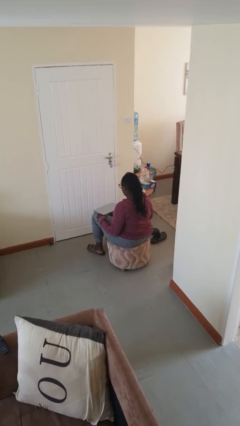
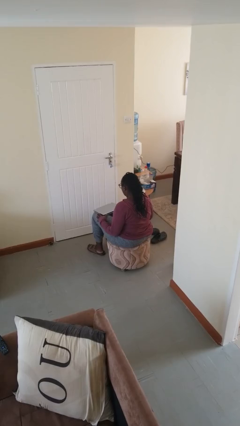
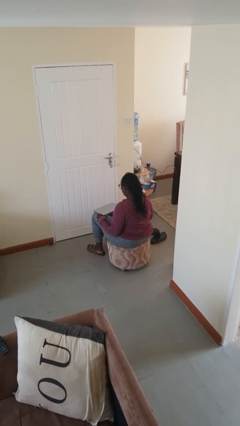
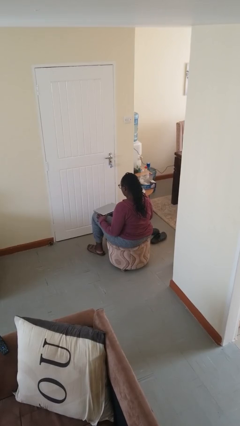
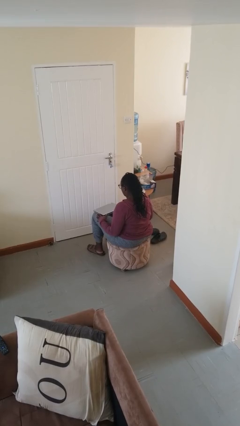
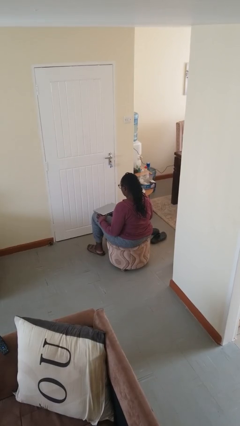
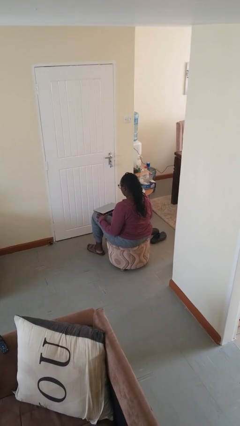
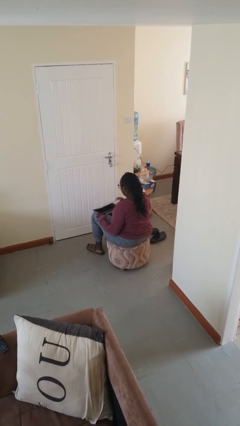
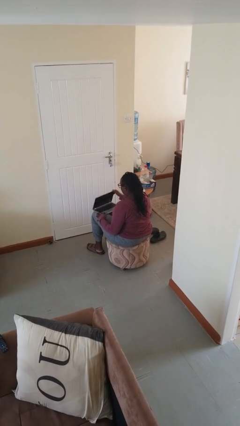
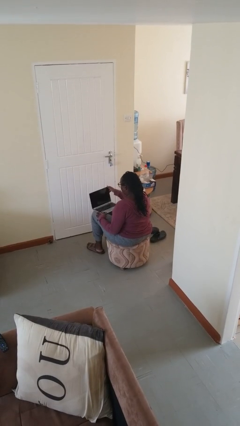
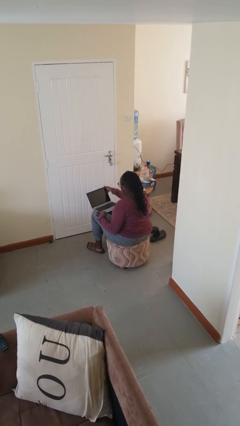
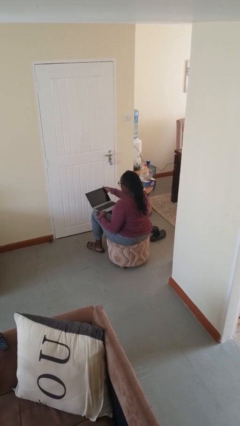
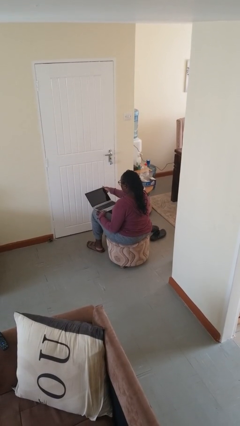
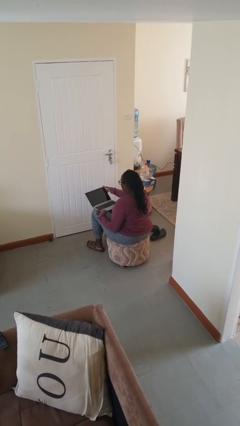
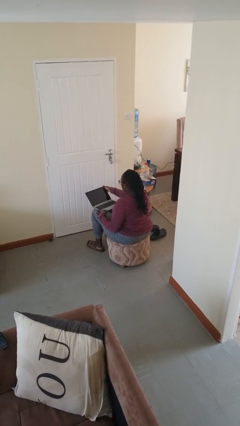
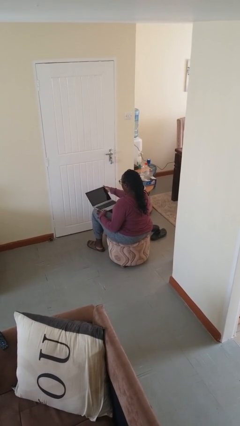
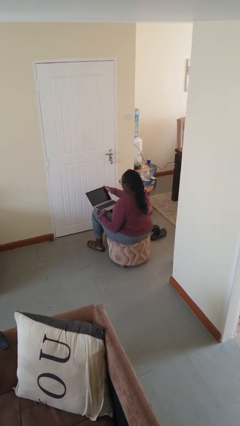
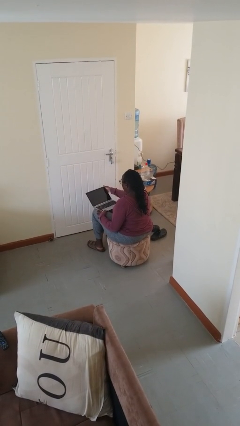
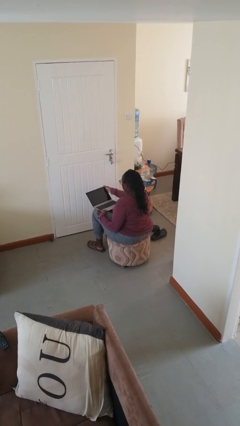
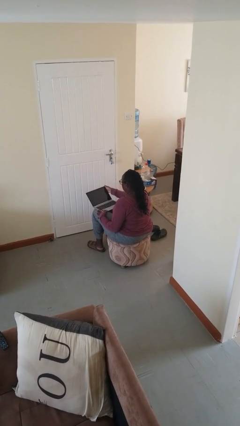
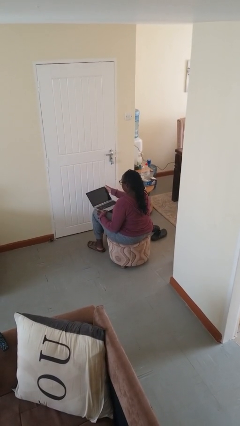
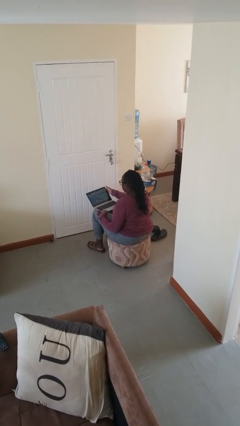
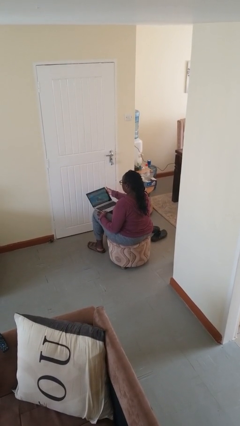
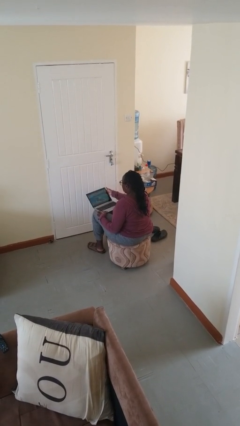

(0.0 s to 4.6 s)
person opens laptop

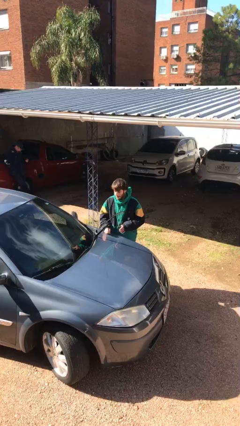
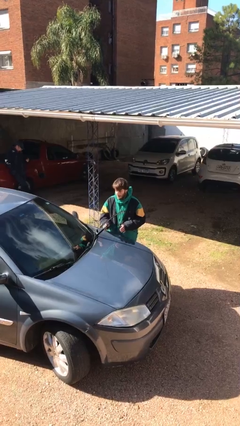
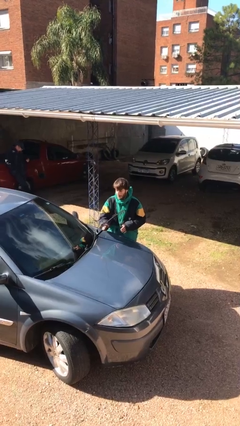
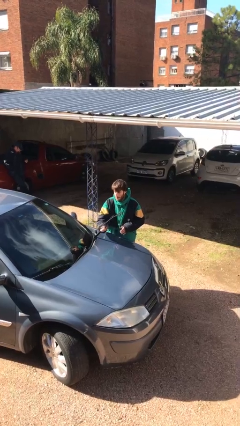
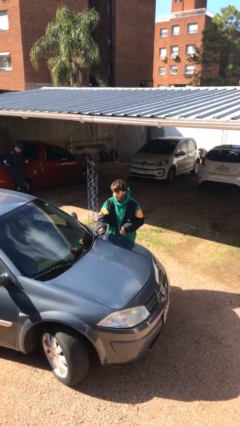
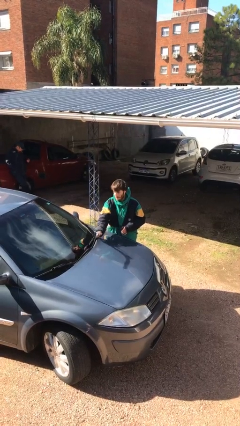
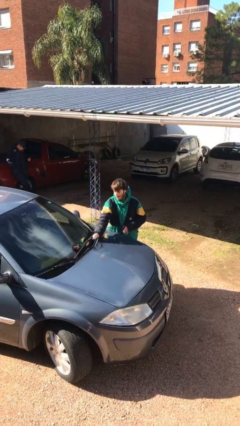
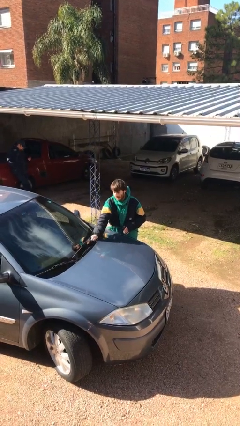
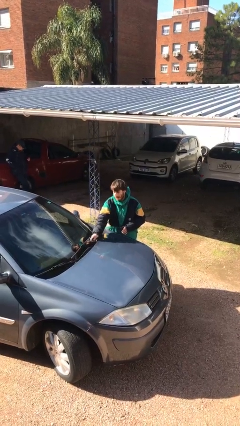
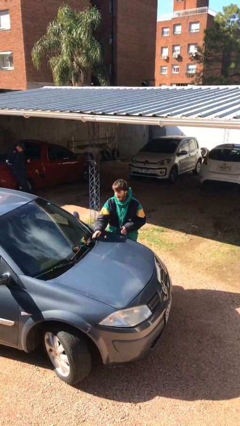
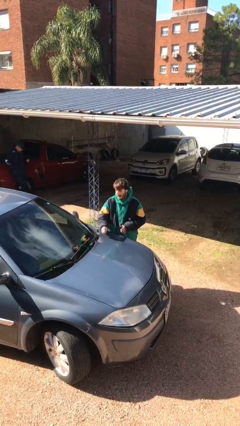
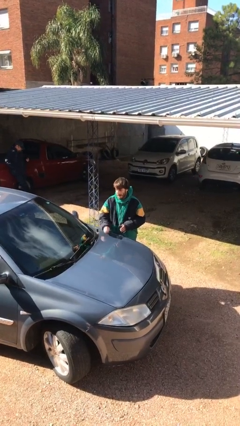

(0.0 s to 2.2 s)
person flips down car wipers

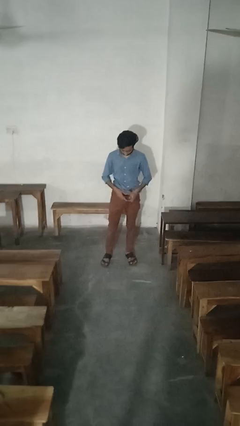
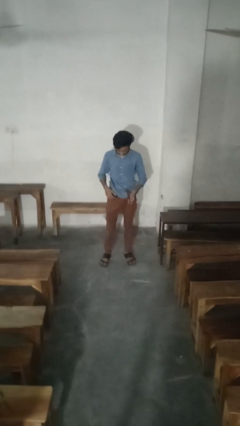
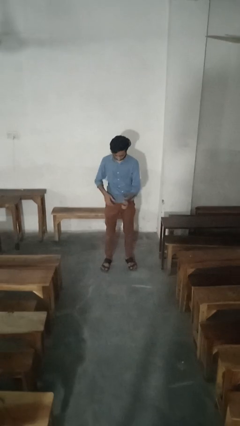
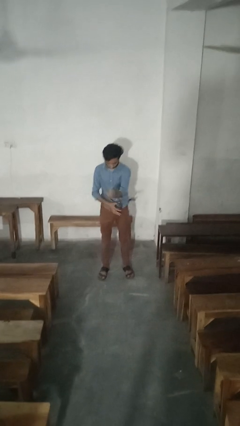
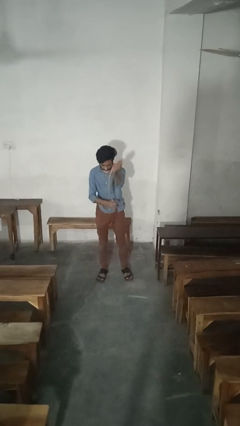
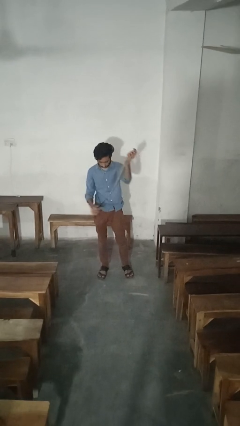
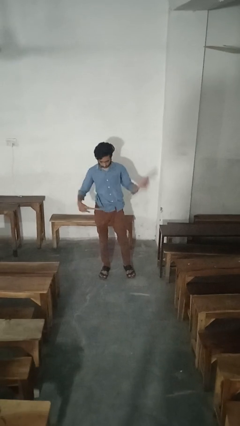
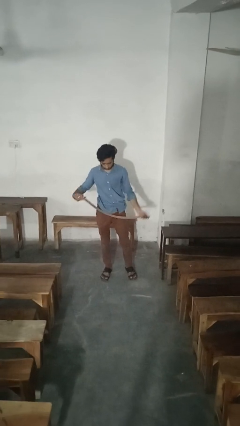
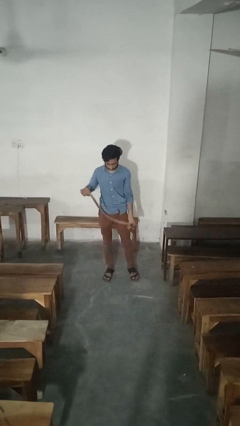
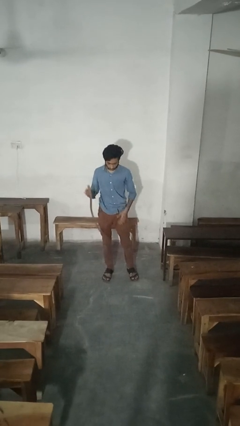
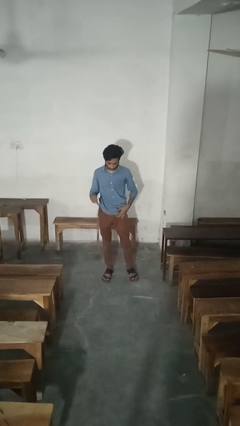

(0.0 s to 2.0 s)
person takes off belt

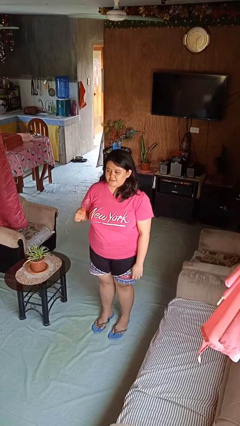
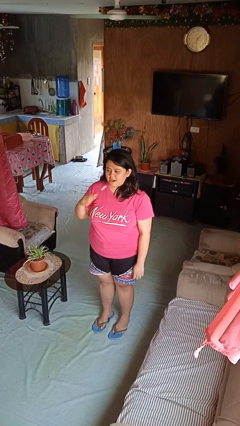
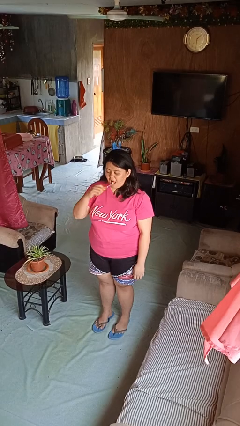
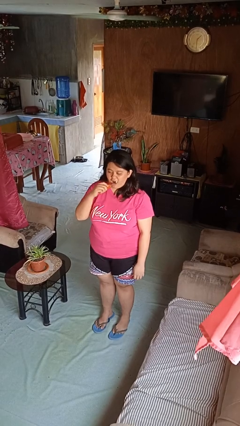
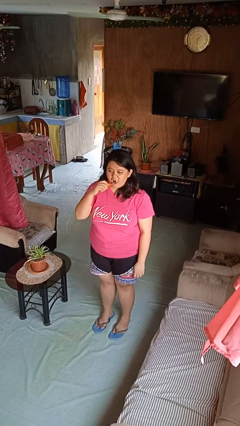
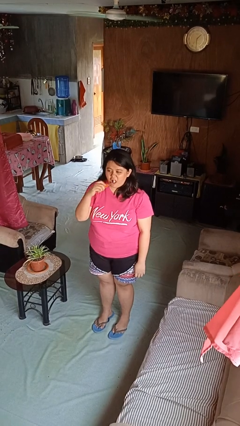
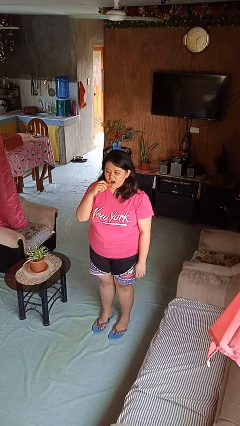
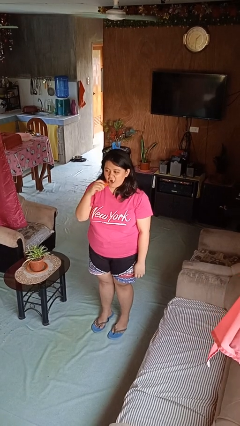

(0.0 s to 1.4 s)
person brushes teeth

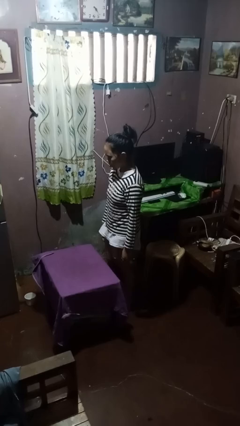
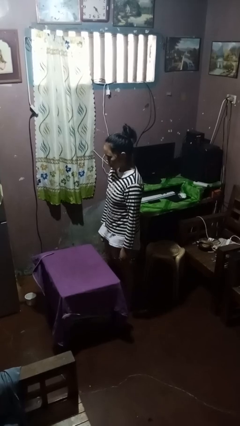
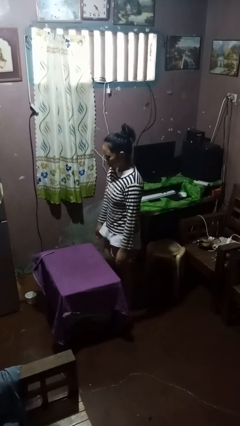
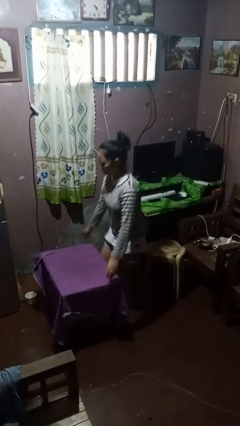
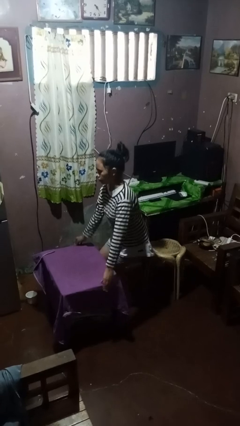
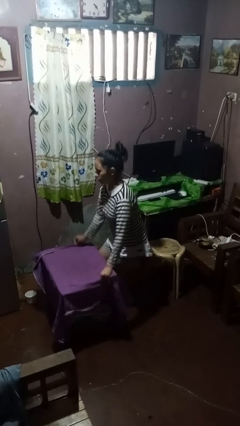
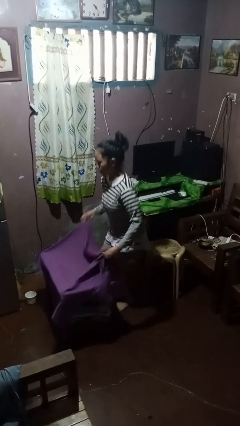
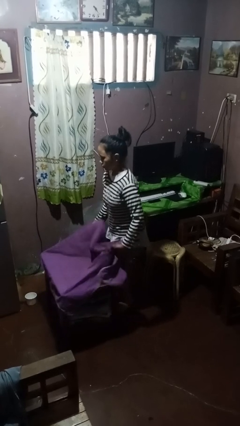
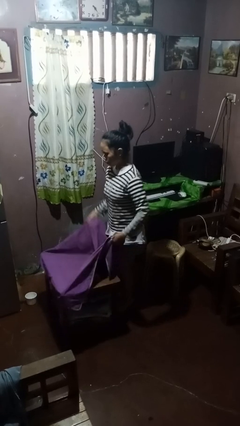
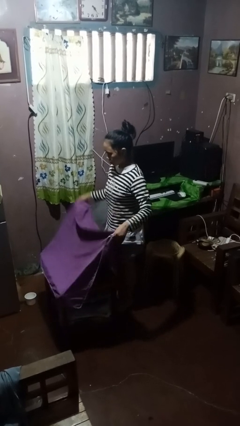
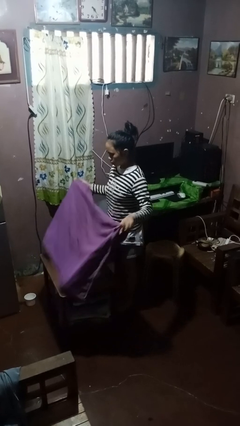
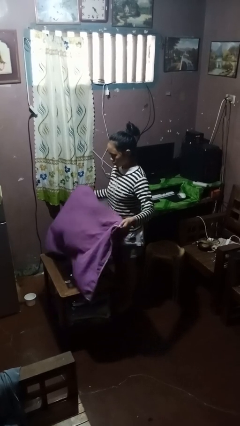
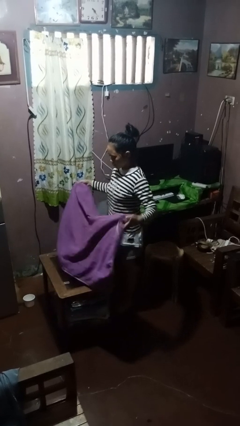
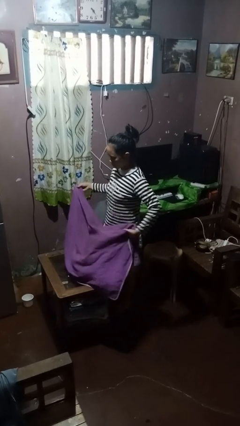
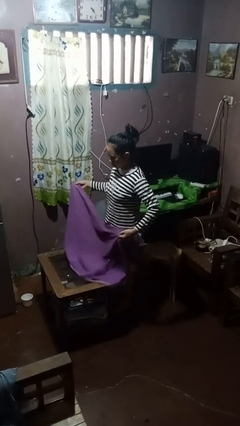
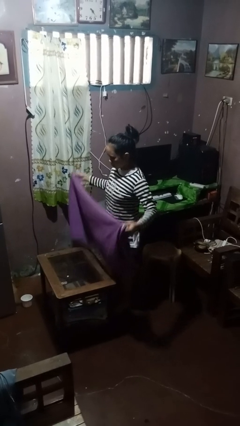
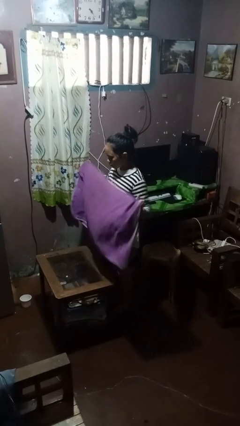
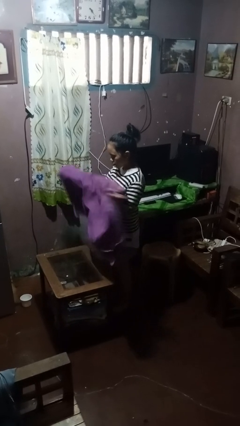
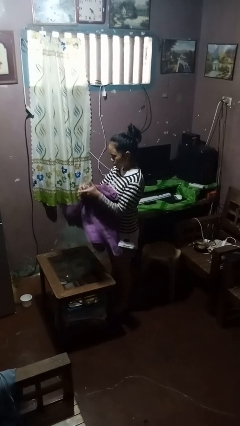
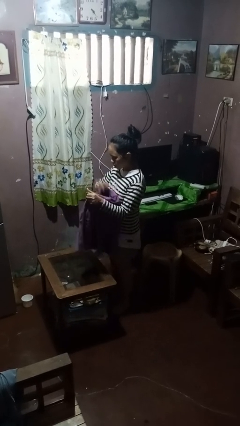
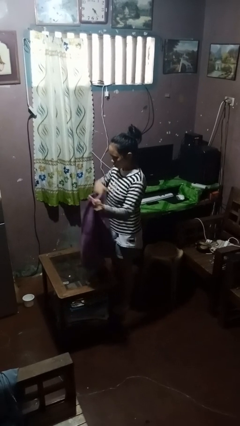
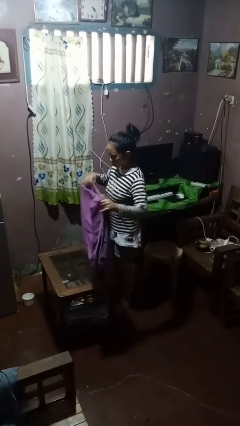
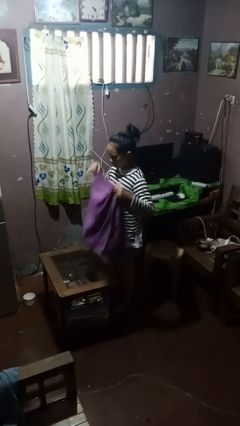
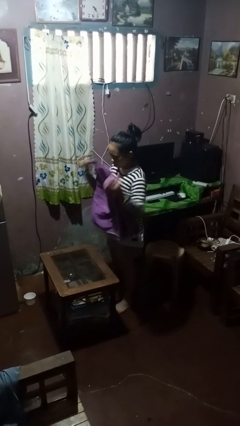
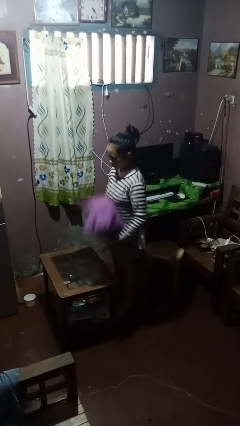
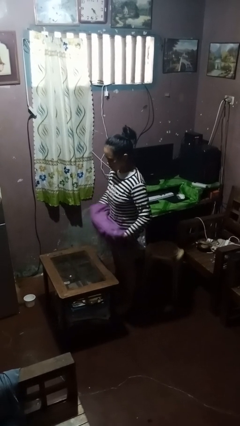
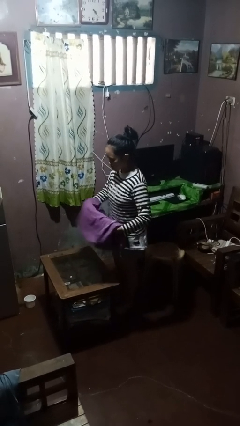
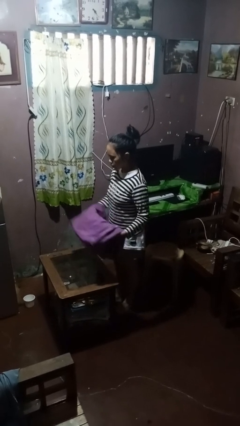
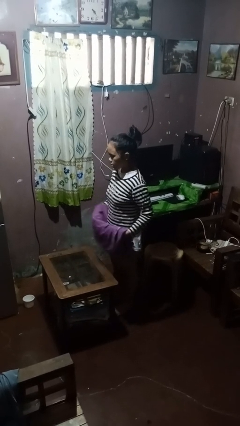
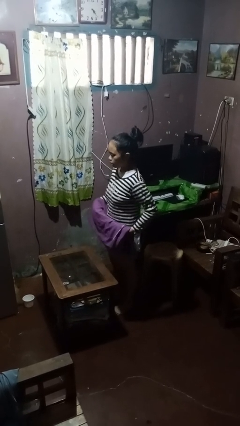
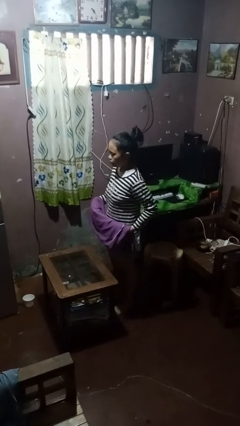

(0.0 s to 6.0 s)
person folds tablecloth

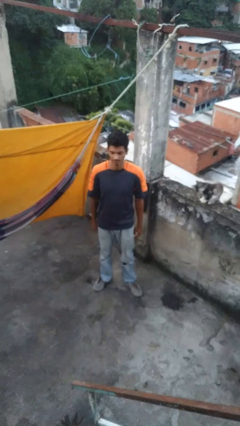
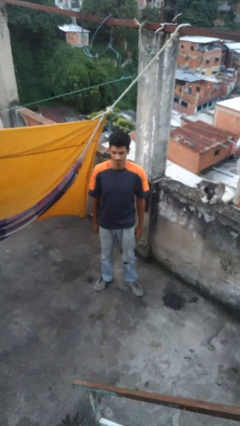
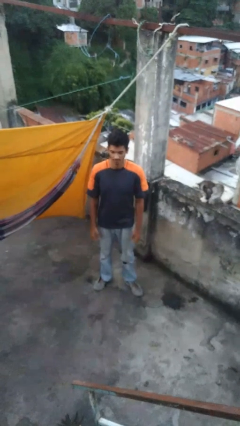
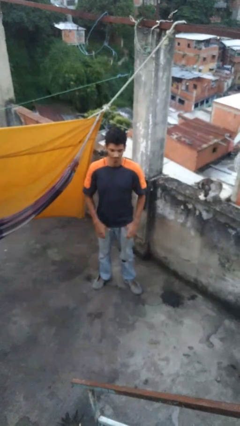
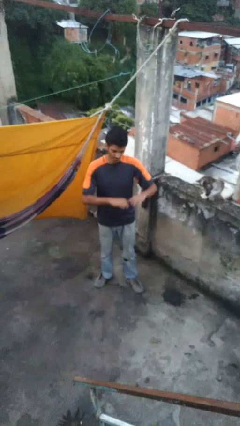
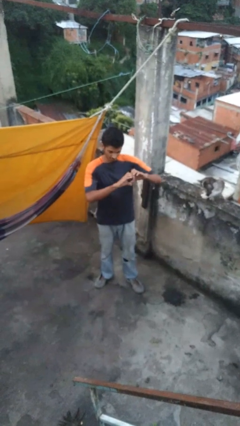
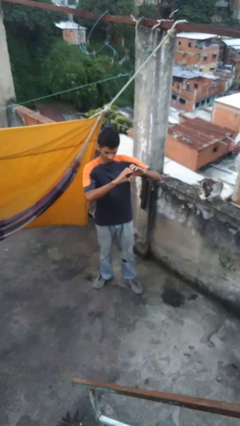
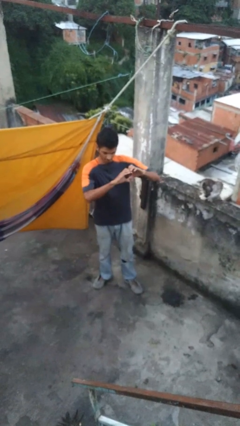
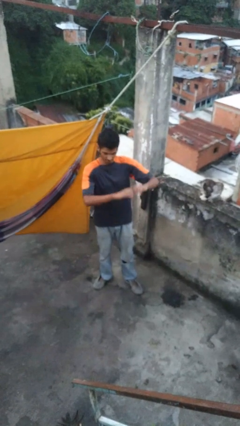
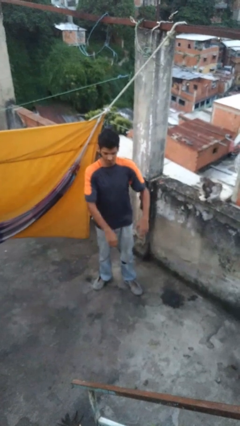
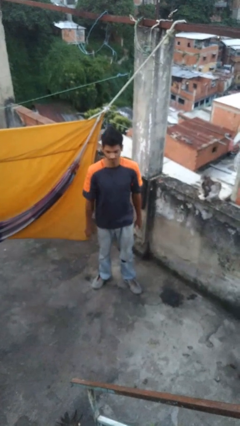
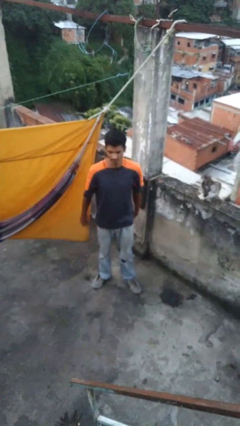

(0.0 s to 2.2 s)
person gestures heart
